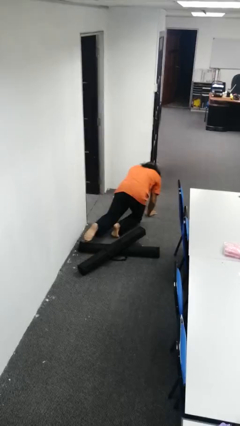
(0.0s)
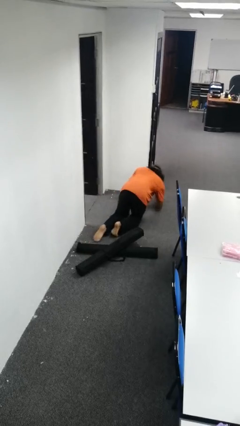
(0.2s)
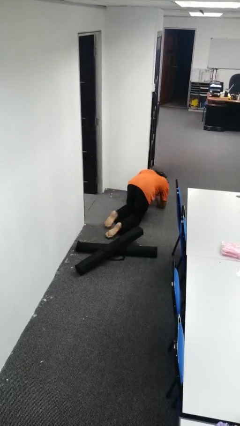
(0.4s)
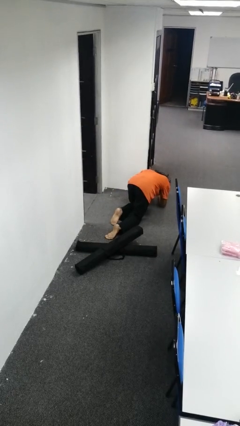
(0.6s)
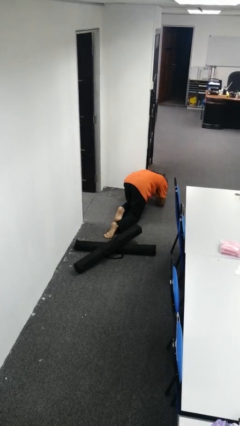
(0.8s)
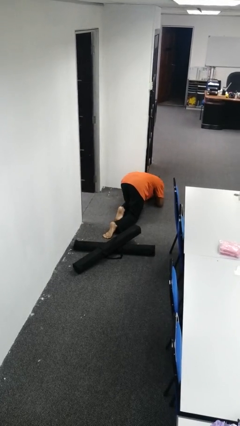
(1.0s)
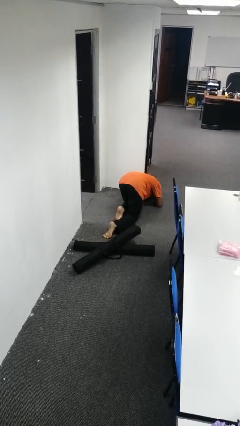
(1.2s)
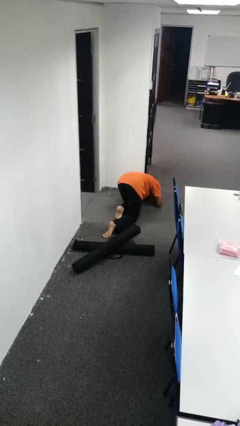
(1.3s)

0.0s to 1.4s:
person lies down on floor

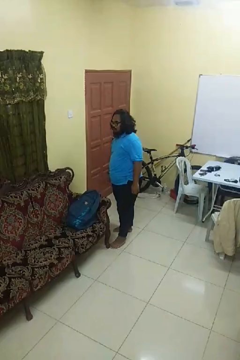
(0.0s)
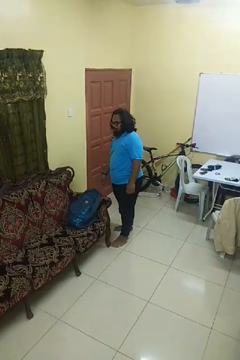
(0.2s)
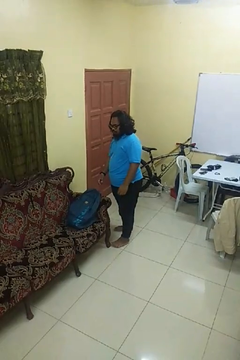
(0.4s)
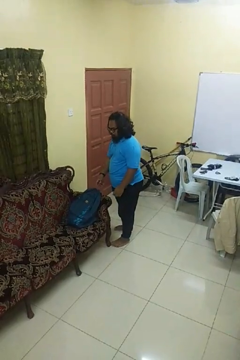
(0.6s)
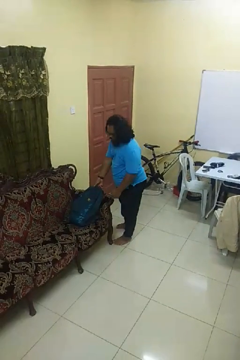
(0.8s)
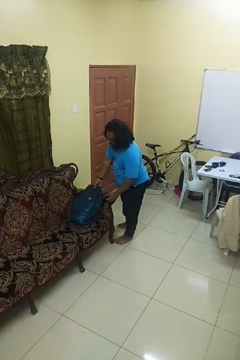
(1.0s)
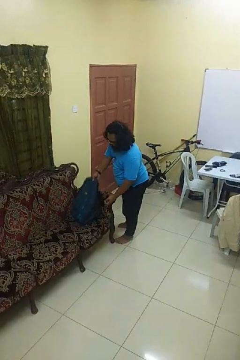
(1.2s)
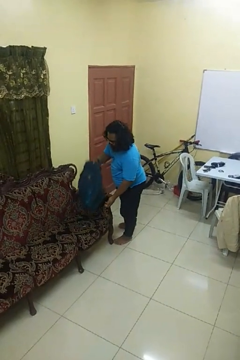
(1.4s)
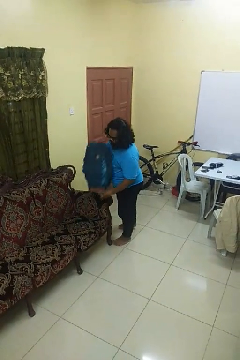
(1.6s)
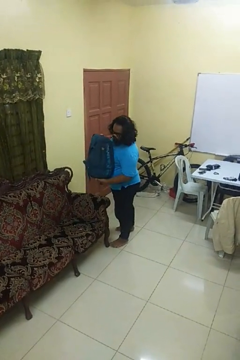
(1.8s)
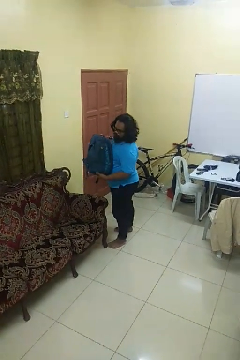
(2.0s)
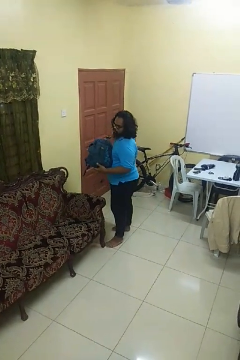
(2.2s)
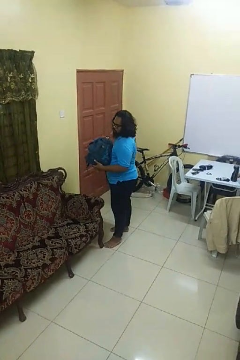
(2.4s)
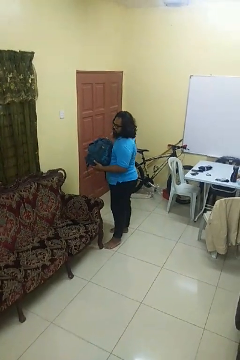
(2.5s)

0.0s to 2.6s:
person picks up object from couch

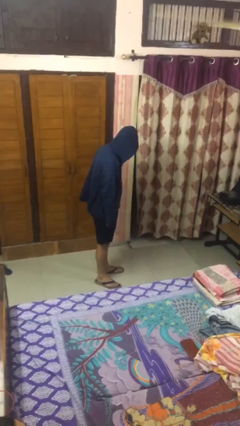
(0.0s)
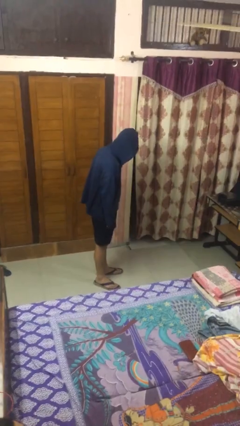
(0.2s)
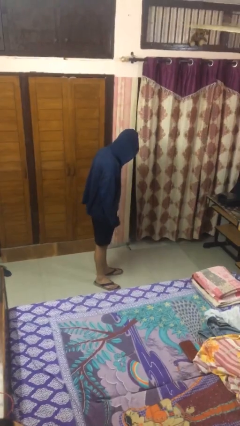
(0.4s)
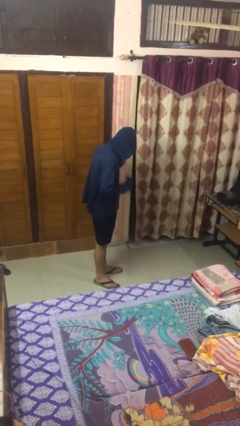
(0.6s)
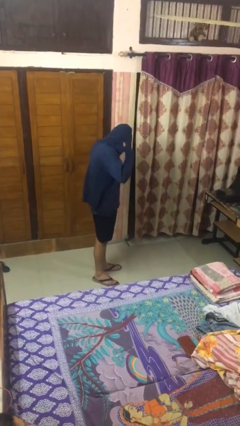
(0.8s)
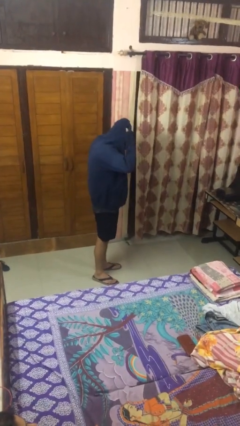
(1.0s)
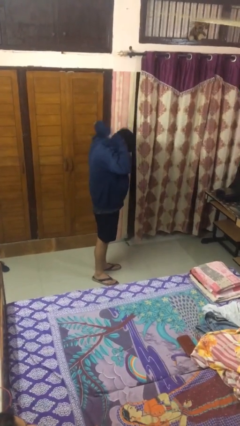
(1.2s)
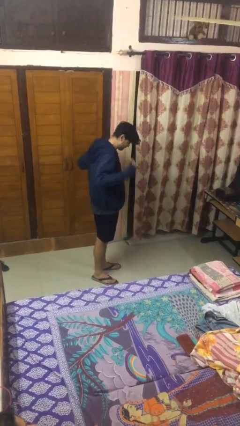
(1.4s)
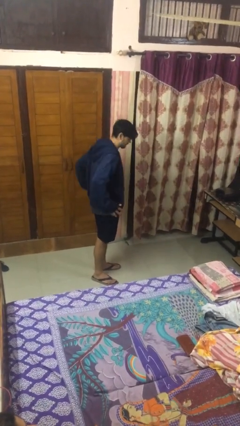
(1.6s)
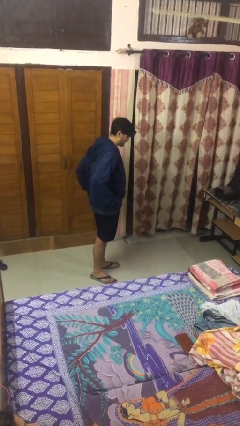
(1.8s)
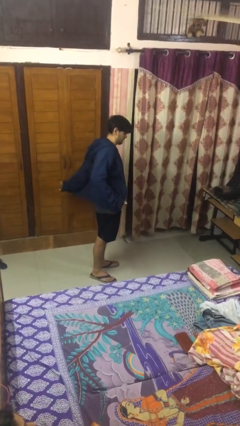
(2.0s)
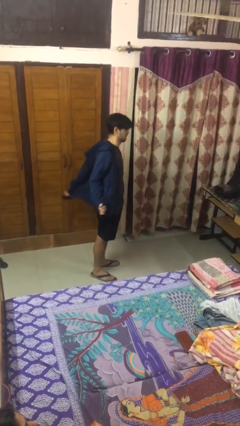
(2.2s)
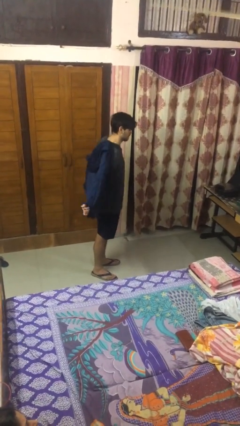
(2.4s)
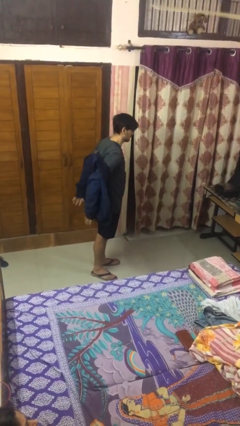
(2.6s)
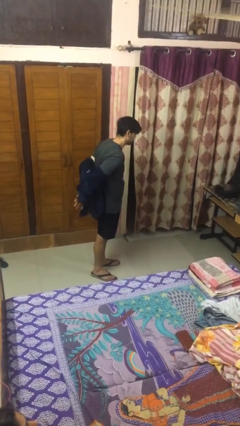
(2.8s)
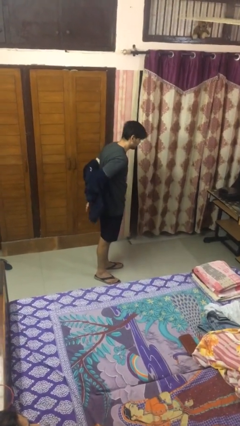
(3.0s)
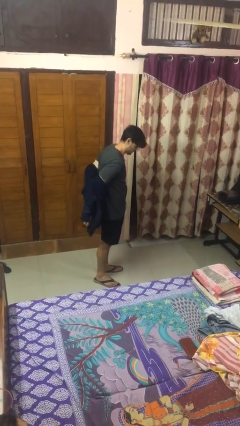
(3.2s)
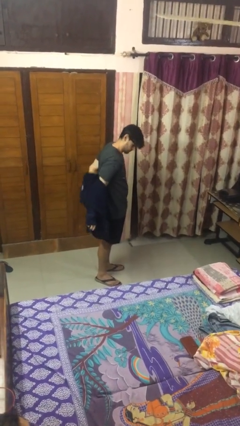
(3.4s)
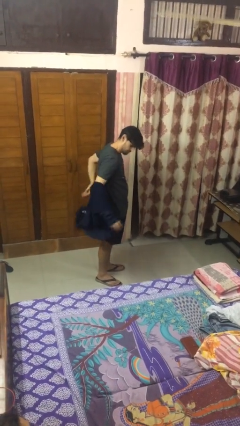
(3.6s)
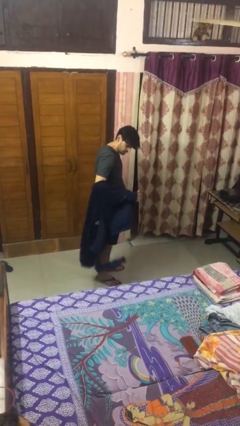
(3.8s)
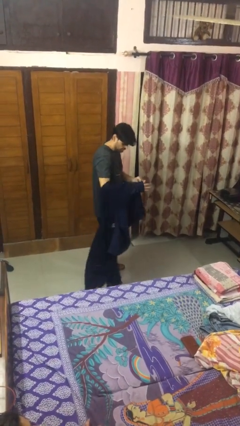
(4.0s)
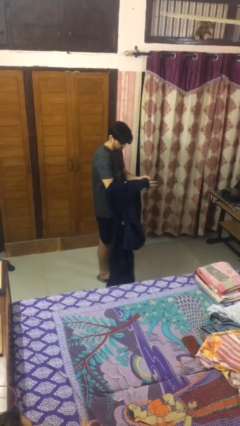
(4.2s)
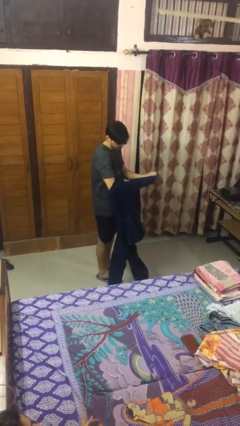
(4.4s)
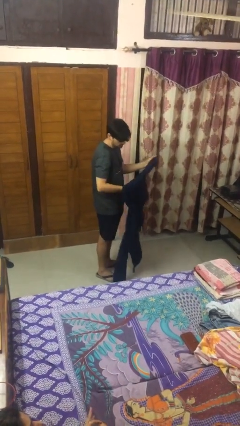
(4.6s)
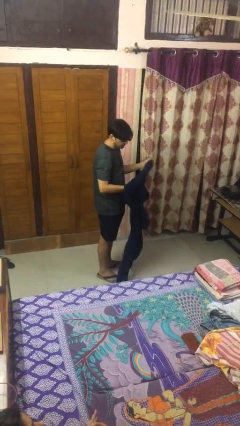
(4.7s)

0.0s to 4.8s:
person takes off hoodie

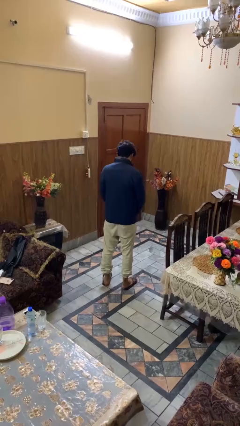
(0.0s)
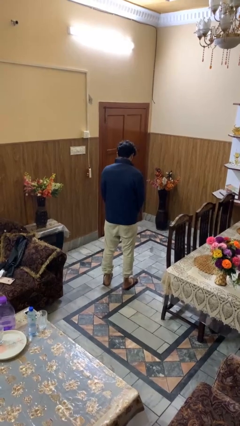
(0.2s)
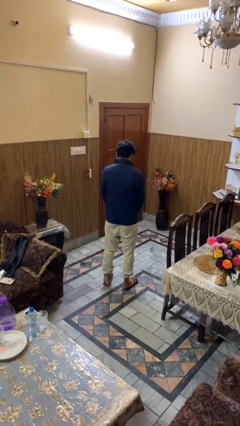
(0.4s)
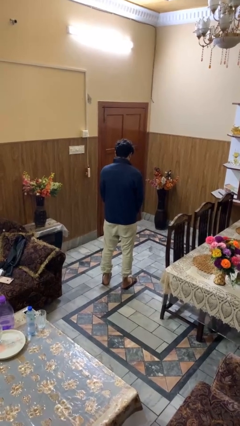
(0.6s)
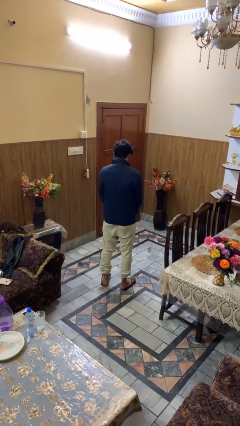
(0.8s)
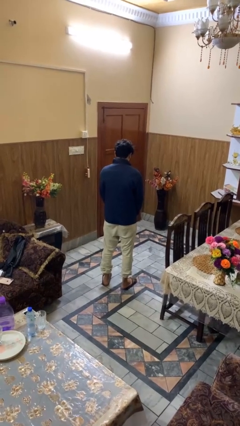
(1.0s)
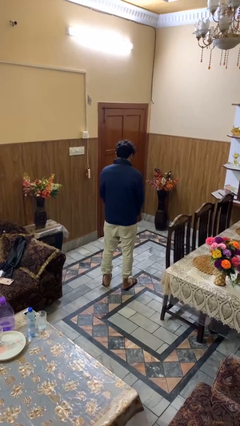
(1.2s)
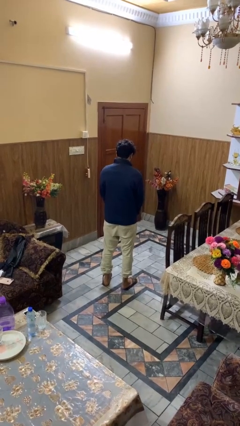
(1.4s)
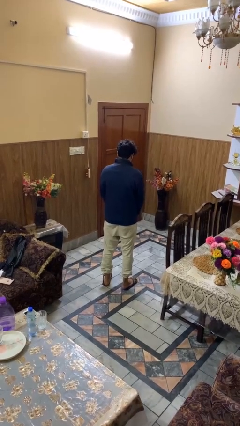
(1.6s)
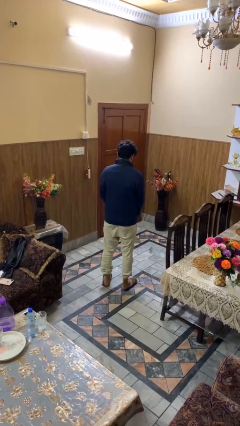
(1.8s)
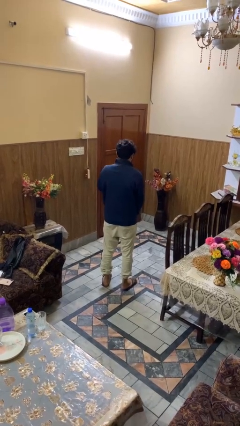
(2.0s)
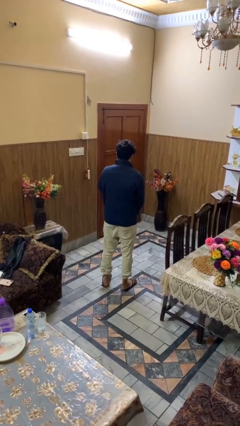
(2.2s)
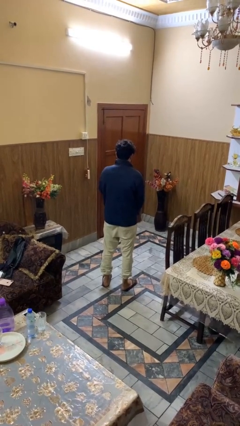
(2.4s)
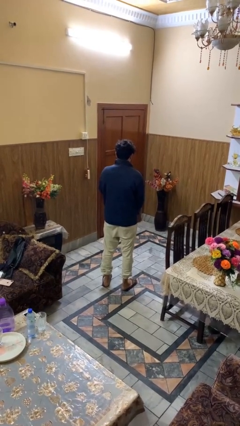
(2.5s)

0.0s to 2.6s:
person zips up jacket

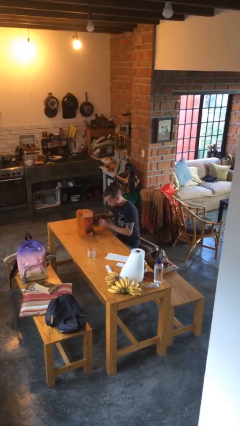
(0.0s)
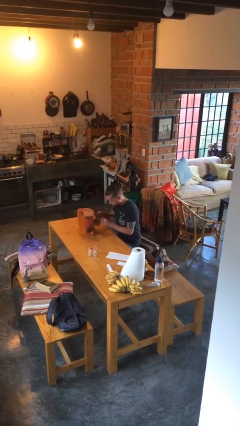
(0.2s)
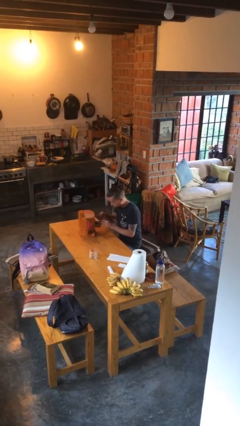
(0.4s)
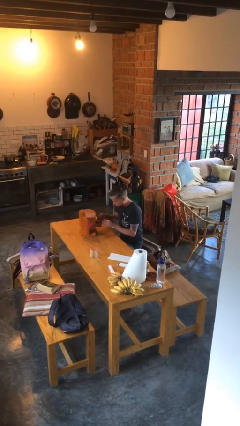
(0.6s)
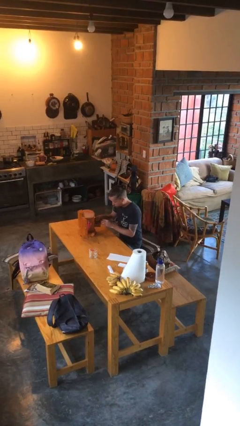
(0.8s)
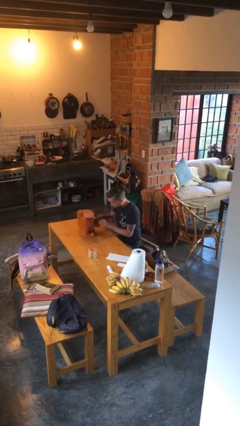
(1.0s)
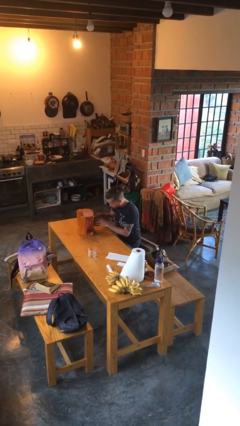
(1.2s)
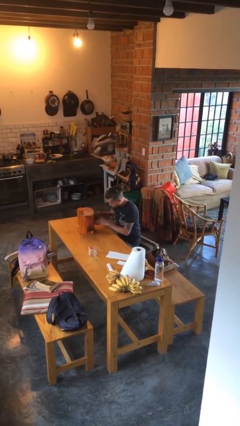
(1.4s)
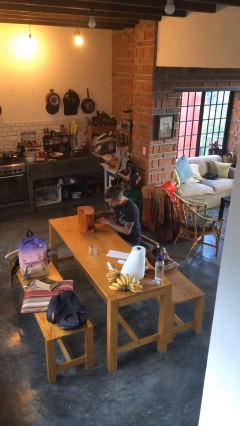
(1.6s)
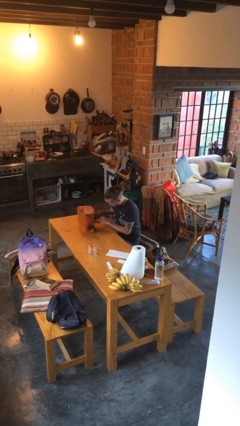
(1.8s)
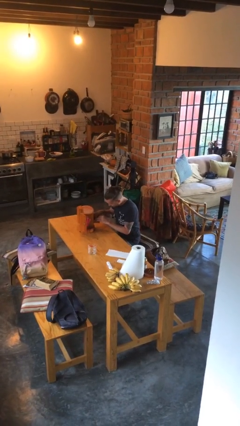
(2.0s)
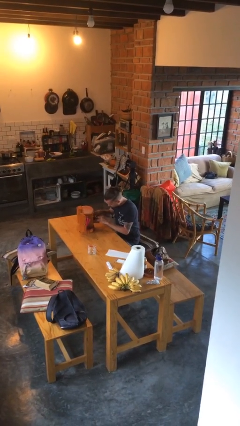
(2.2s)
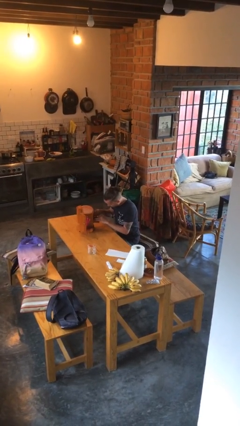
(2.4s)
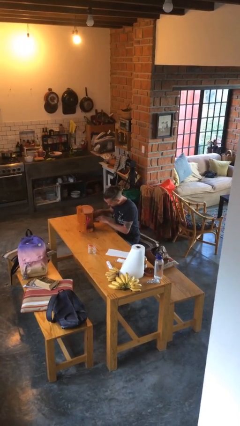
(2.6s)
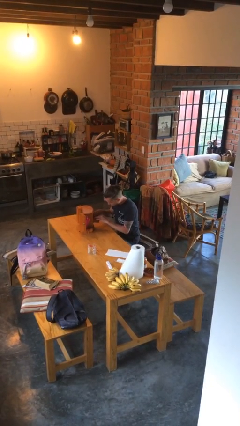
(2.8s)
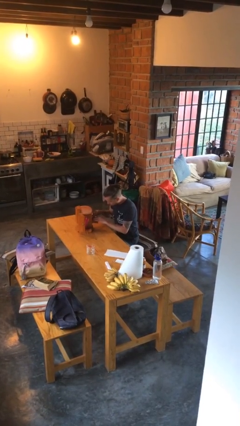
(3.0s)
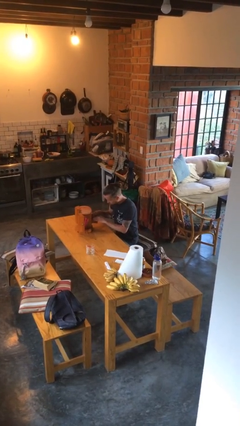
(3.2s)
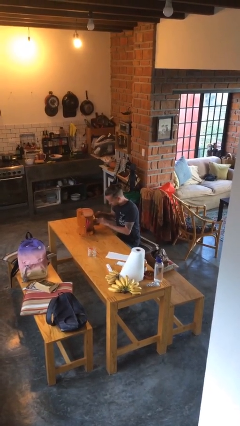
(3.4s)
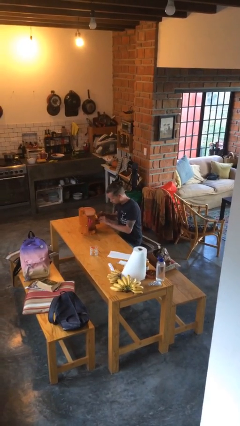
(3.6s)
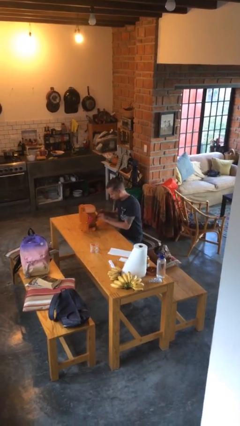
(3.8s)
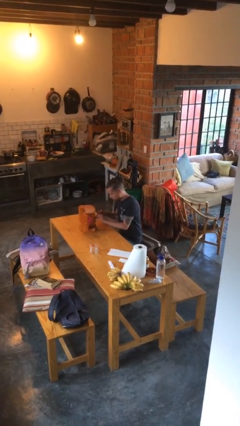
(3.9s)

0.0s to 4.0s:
person searches jewelry box

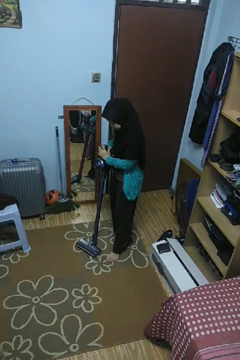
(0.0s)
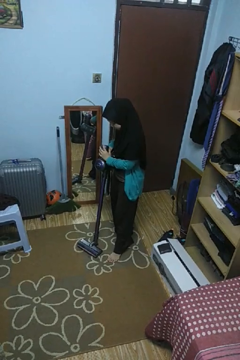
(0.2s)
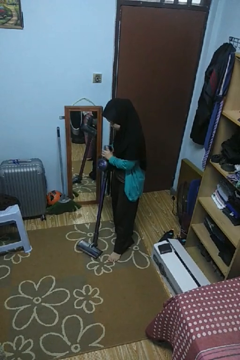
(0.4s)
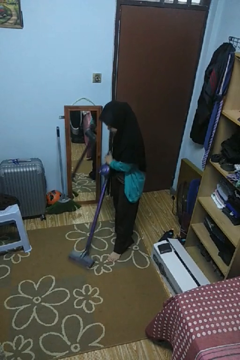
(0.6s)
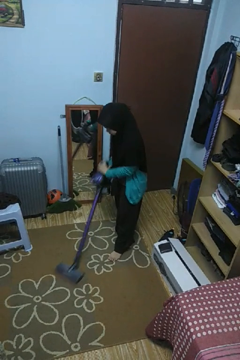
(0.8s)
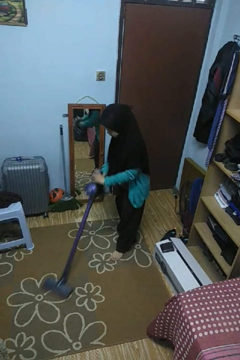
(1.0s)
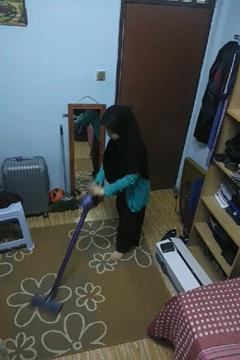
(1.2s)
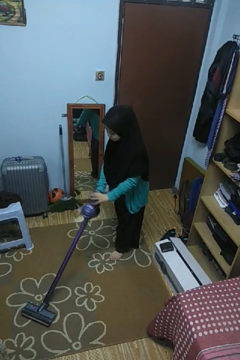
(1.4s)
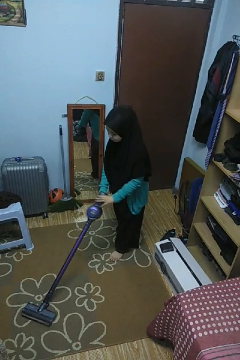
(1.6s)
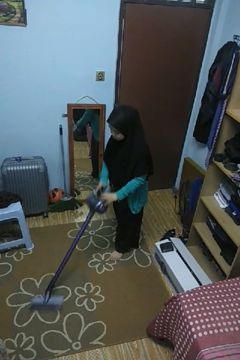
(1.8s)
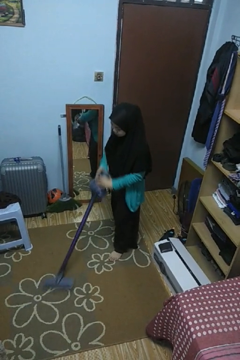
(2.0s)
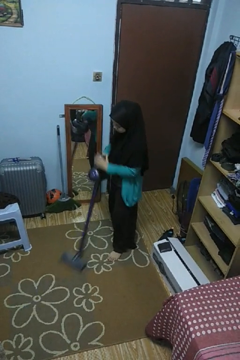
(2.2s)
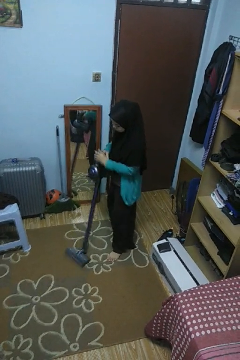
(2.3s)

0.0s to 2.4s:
person vacuums carpet

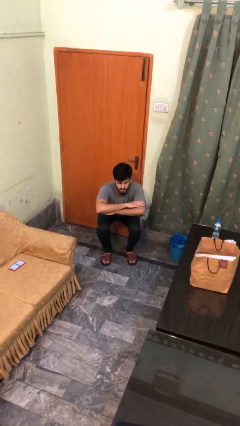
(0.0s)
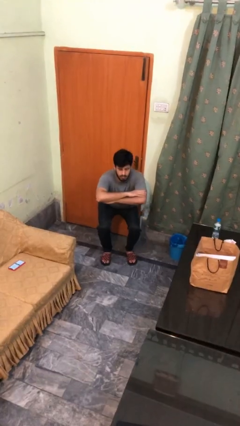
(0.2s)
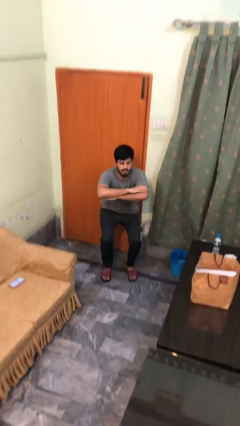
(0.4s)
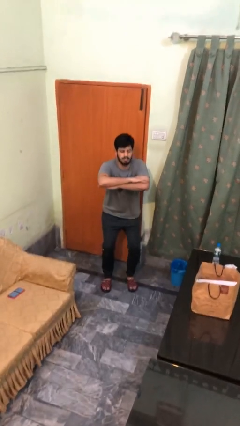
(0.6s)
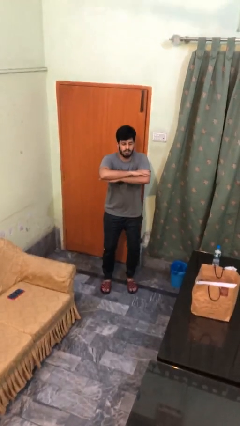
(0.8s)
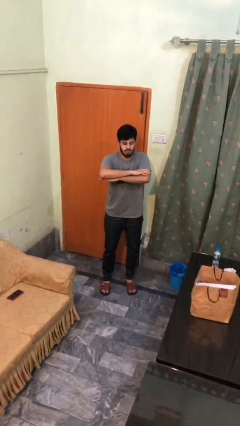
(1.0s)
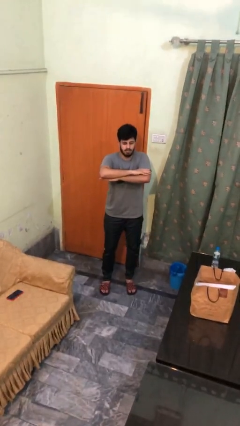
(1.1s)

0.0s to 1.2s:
person stands up
